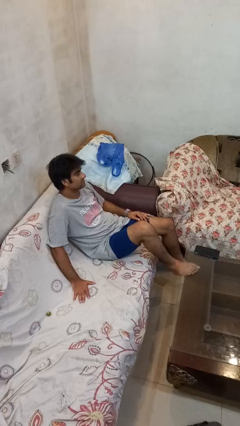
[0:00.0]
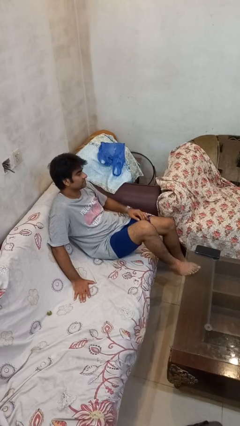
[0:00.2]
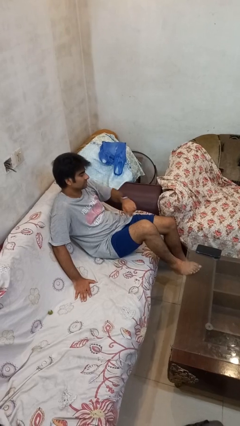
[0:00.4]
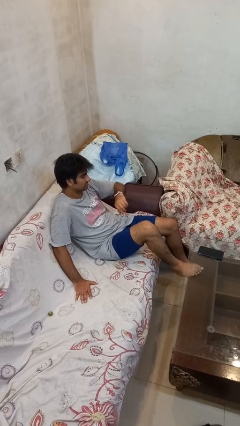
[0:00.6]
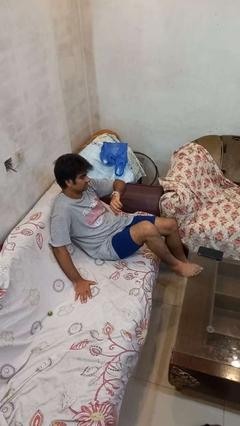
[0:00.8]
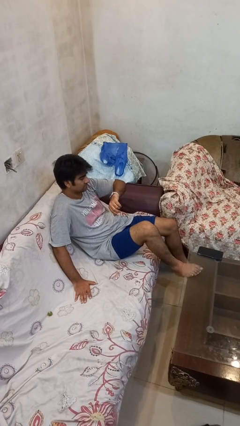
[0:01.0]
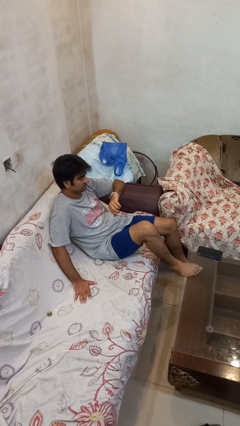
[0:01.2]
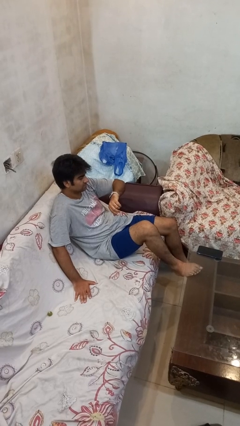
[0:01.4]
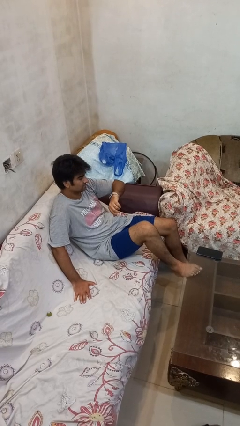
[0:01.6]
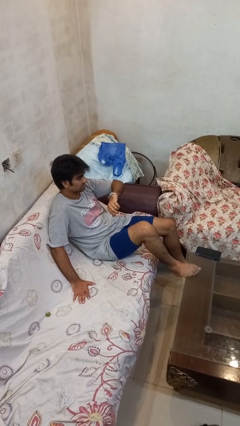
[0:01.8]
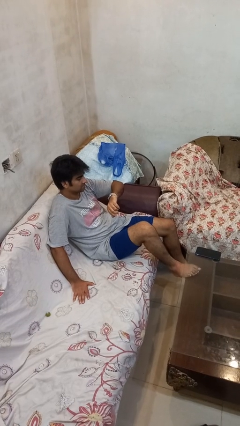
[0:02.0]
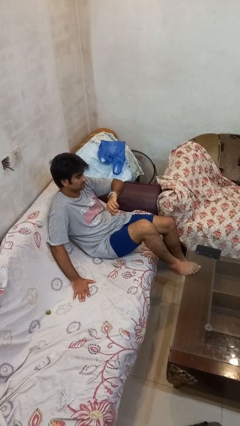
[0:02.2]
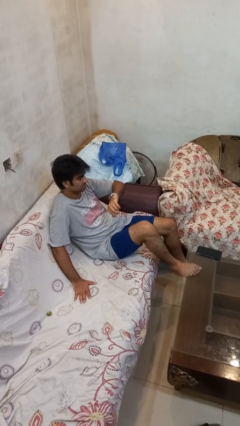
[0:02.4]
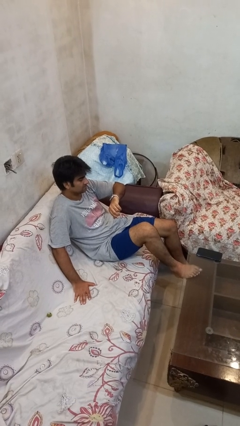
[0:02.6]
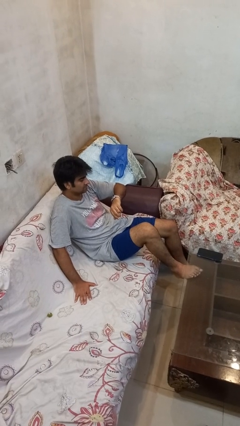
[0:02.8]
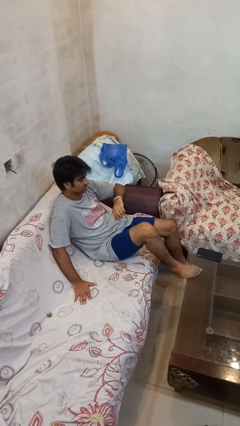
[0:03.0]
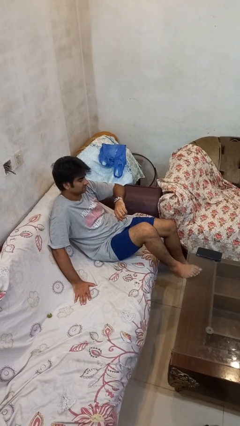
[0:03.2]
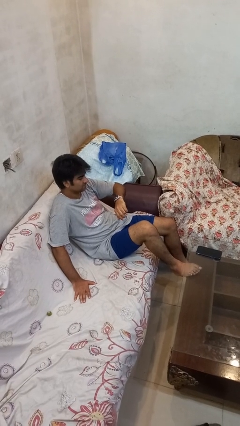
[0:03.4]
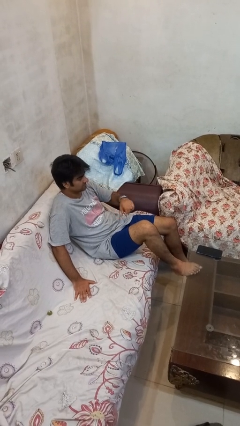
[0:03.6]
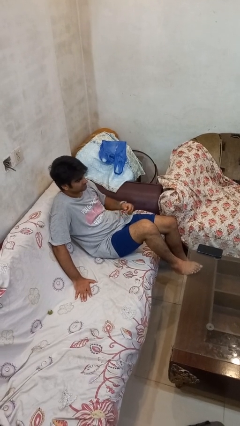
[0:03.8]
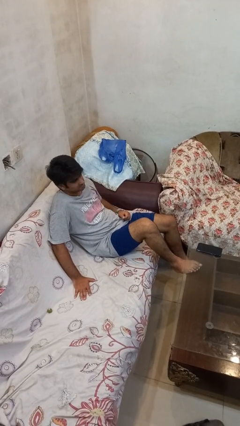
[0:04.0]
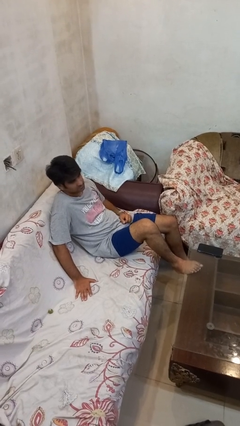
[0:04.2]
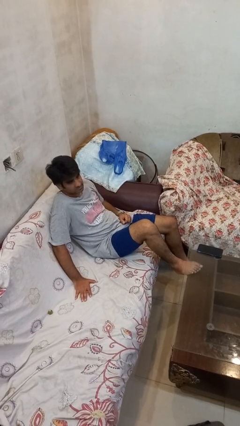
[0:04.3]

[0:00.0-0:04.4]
person looks at wristwatch

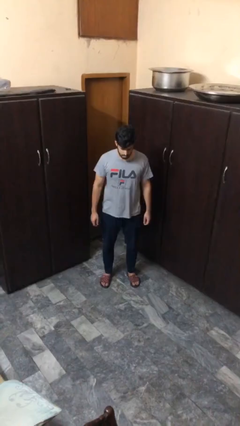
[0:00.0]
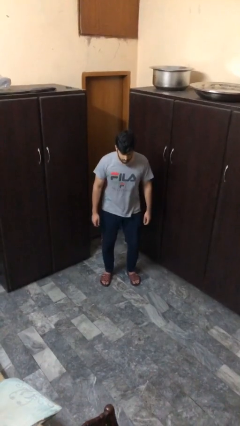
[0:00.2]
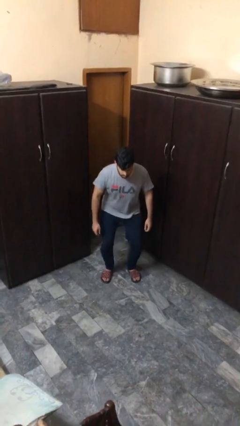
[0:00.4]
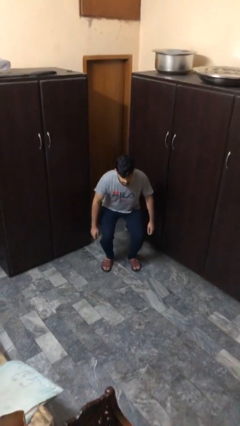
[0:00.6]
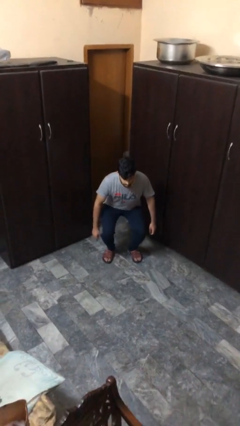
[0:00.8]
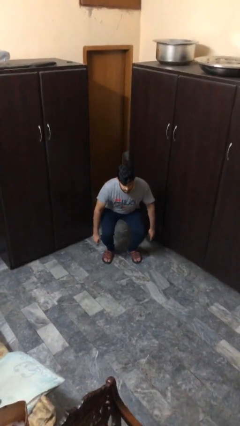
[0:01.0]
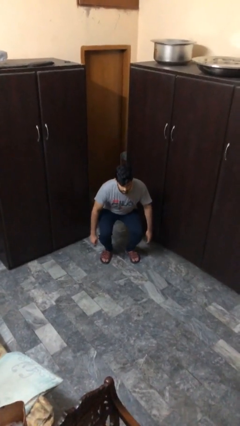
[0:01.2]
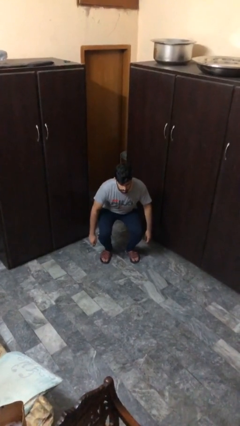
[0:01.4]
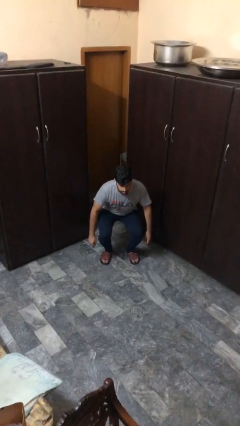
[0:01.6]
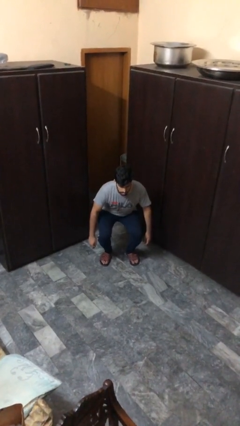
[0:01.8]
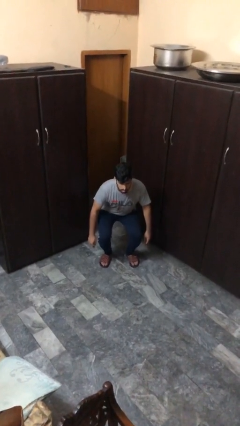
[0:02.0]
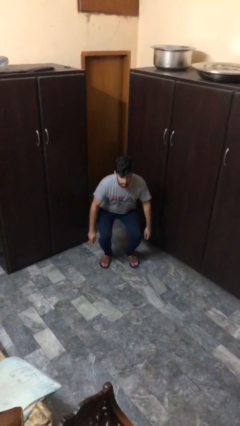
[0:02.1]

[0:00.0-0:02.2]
person squats

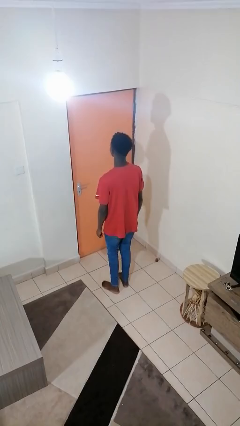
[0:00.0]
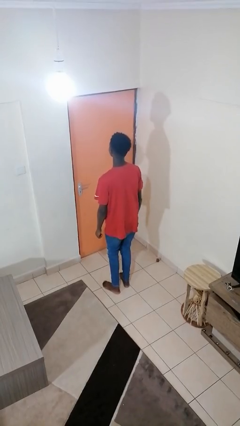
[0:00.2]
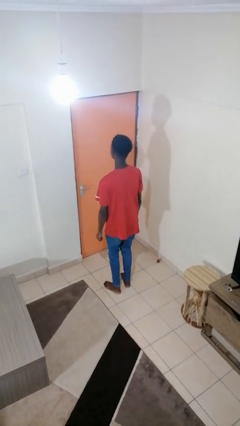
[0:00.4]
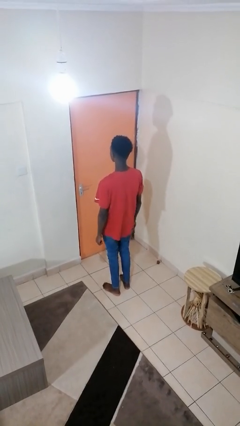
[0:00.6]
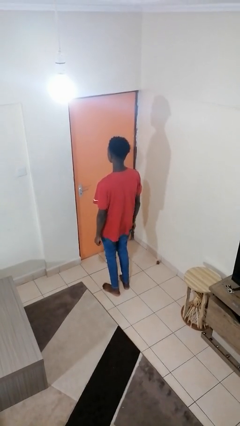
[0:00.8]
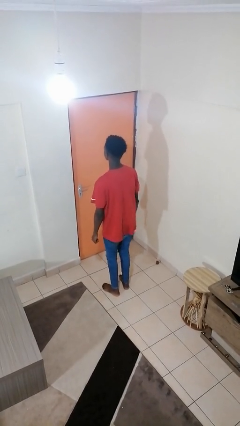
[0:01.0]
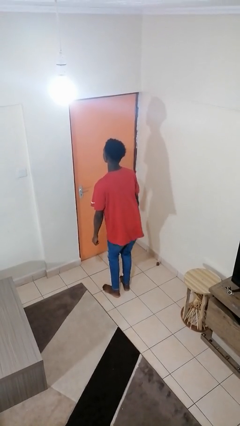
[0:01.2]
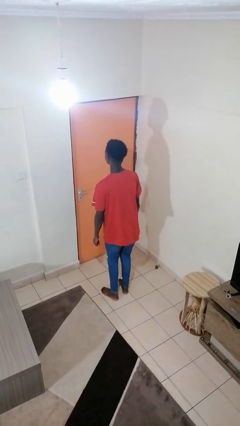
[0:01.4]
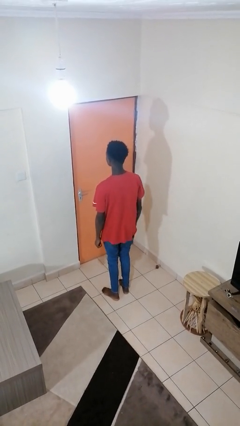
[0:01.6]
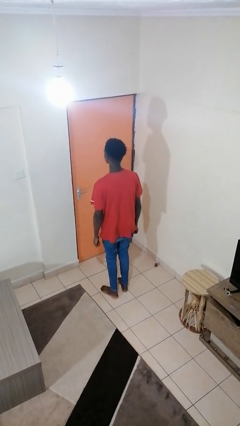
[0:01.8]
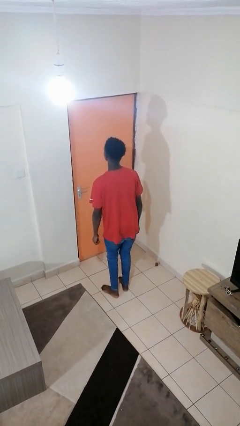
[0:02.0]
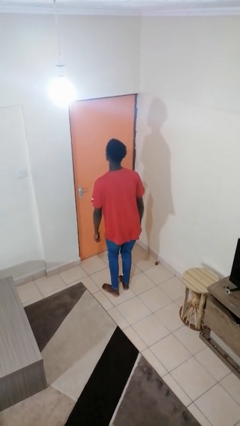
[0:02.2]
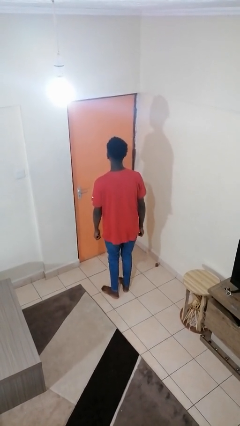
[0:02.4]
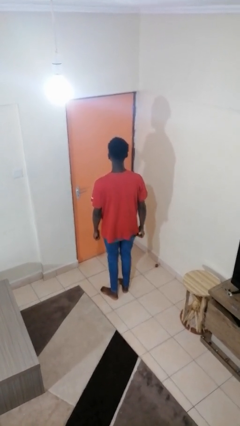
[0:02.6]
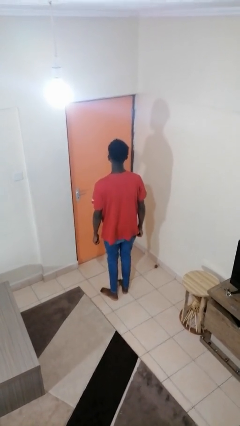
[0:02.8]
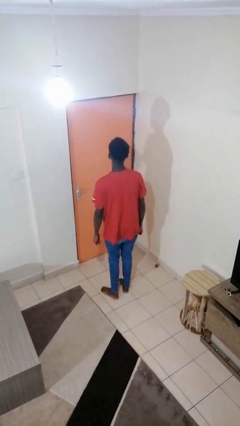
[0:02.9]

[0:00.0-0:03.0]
person wiggles hips

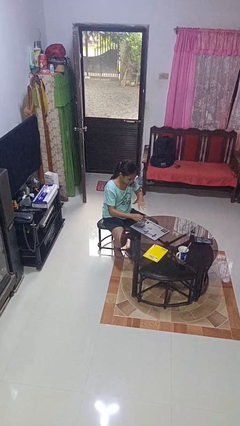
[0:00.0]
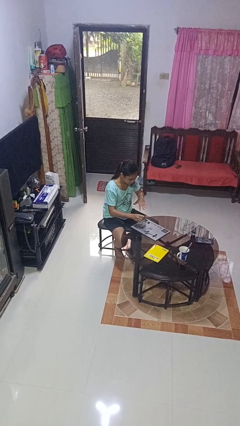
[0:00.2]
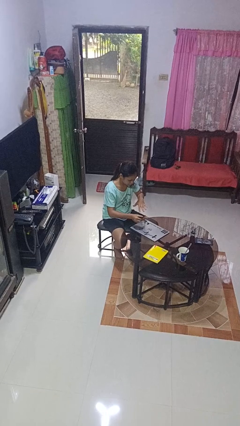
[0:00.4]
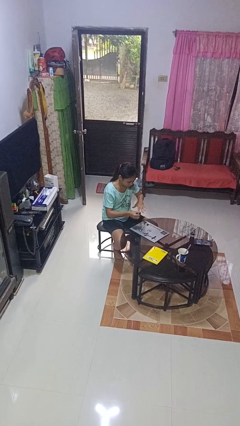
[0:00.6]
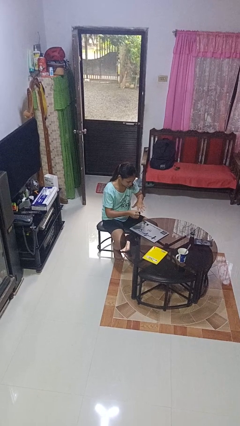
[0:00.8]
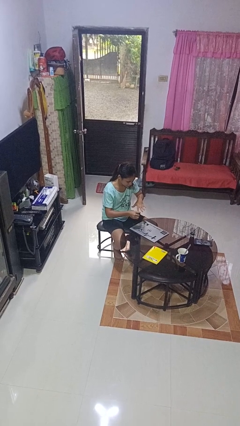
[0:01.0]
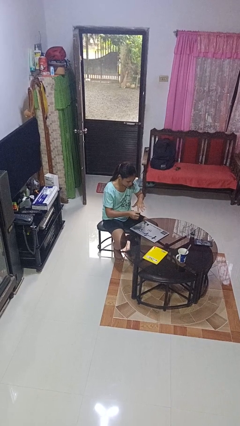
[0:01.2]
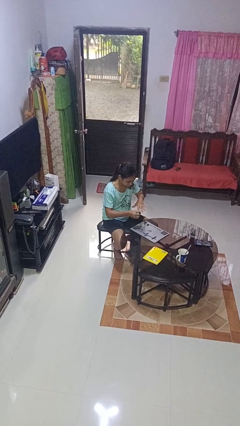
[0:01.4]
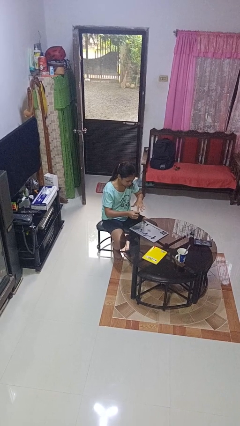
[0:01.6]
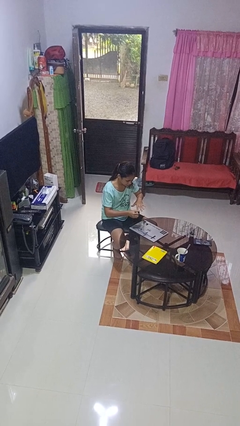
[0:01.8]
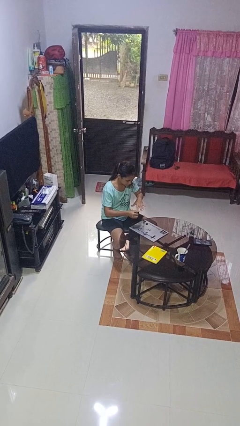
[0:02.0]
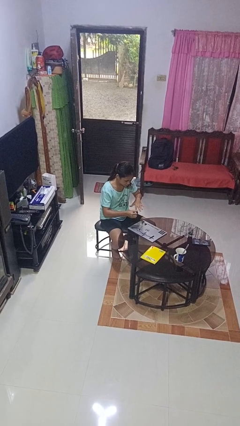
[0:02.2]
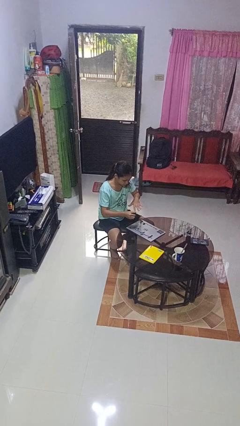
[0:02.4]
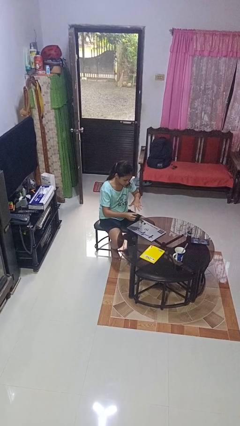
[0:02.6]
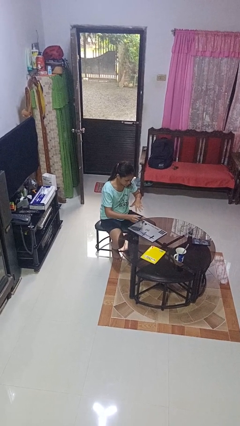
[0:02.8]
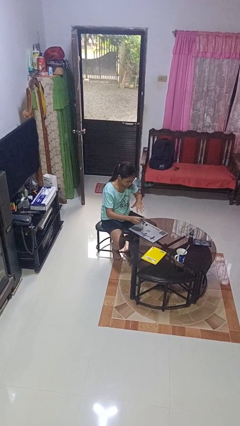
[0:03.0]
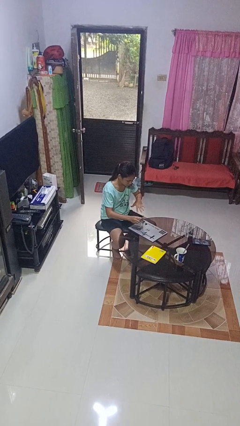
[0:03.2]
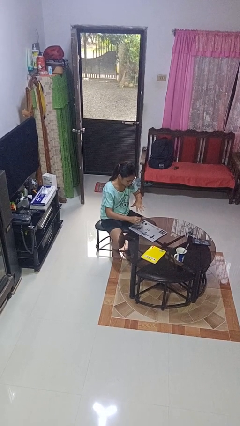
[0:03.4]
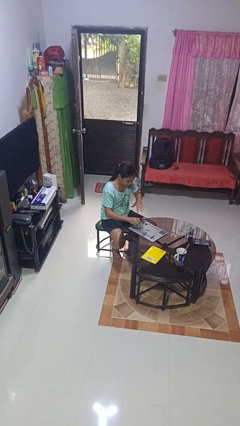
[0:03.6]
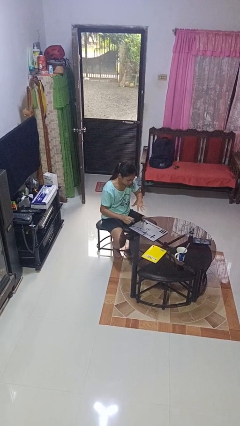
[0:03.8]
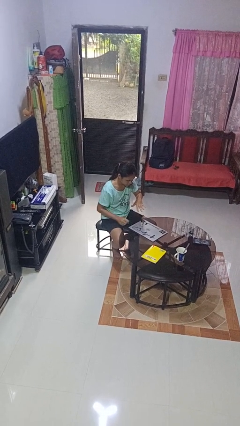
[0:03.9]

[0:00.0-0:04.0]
person paints fingernails

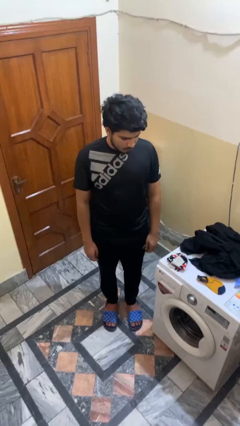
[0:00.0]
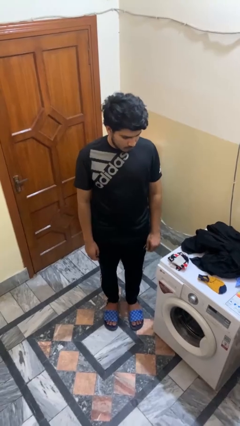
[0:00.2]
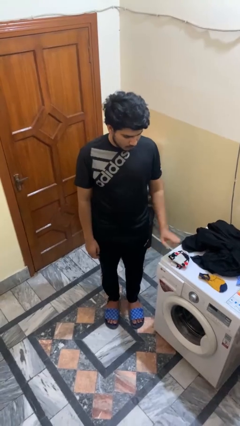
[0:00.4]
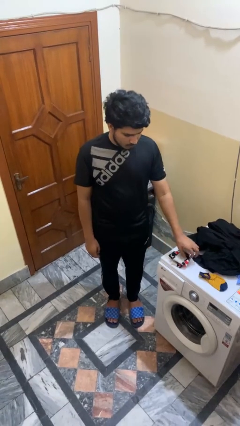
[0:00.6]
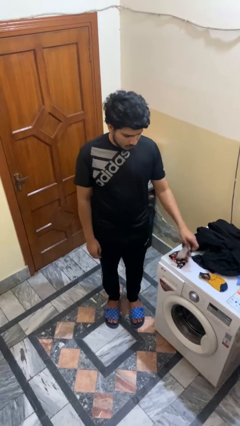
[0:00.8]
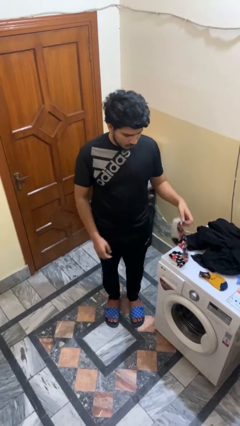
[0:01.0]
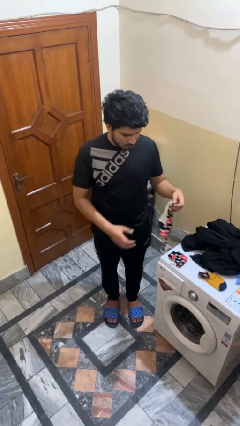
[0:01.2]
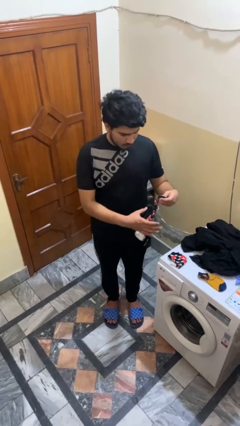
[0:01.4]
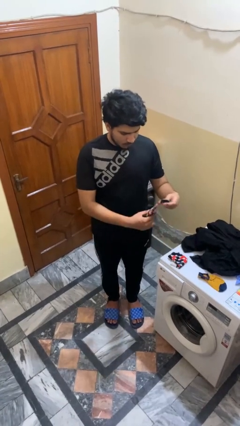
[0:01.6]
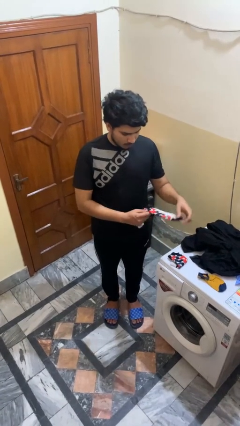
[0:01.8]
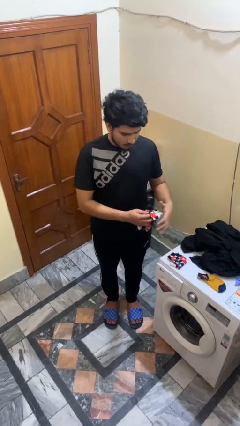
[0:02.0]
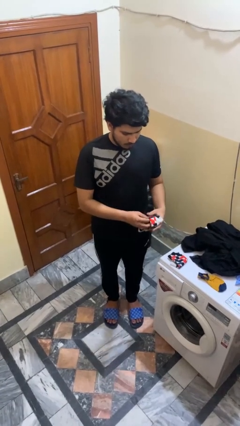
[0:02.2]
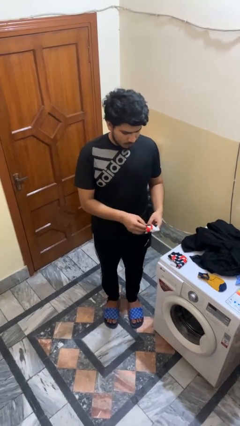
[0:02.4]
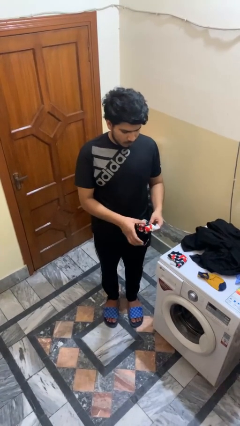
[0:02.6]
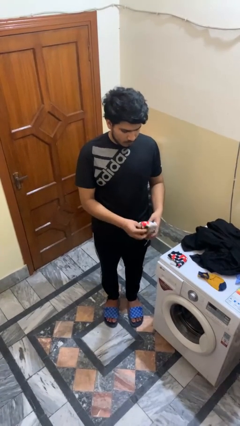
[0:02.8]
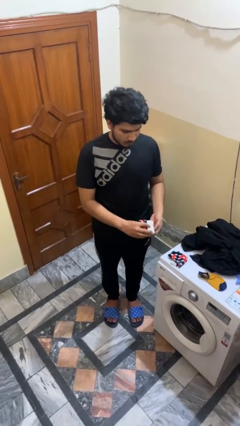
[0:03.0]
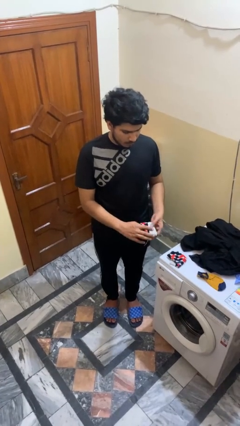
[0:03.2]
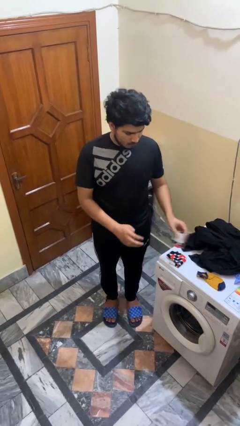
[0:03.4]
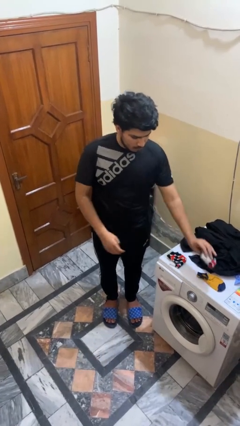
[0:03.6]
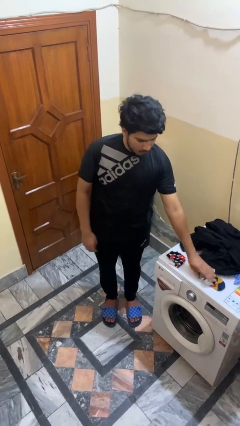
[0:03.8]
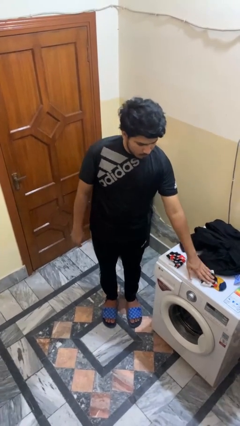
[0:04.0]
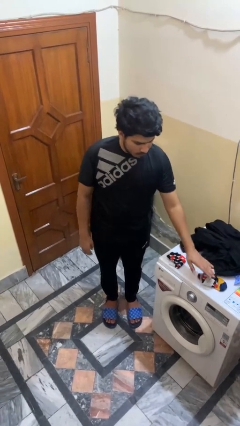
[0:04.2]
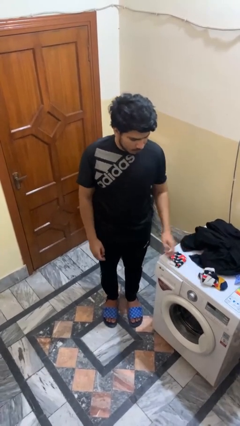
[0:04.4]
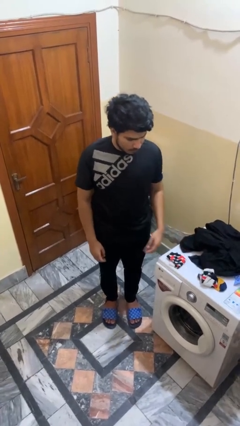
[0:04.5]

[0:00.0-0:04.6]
person folds socks
